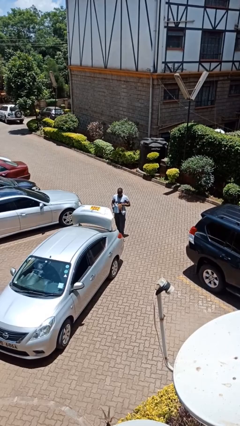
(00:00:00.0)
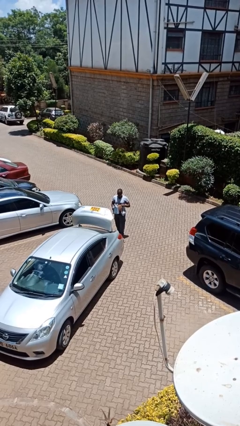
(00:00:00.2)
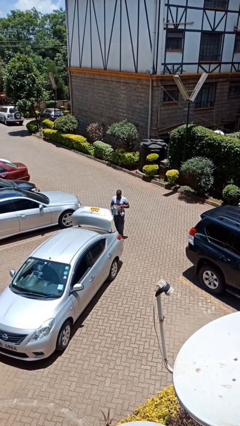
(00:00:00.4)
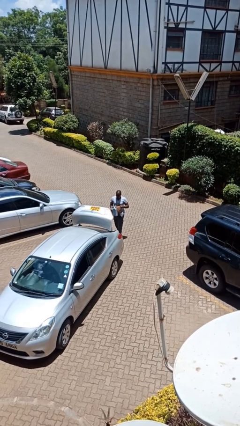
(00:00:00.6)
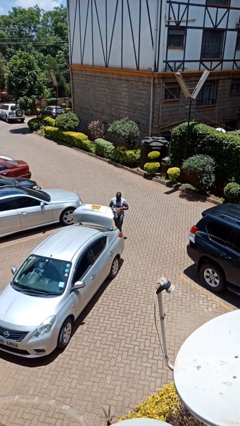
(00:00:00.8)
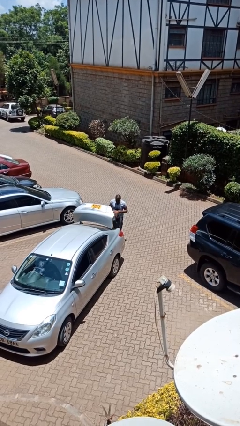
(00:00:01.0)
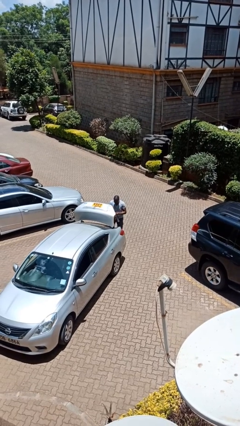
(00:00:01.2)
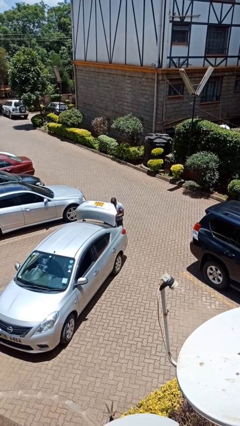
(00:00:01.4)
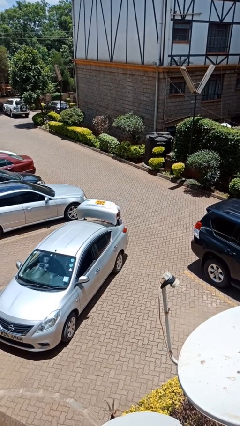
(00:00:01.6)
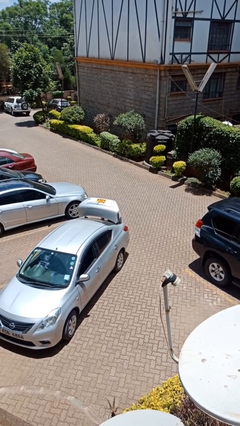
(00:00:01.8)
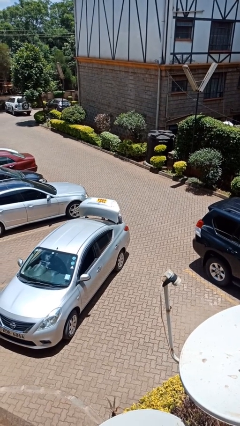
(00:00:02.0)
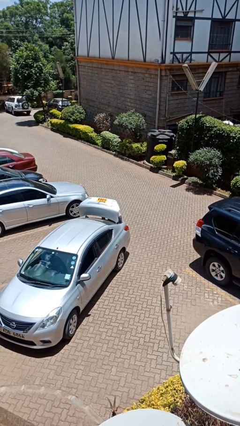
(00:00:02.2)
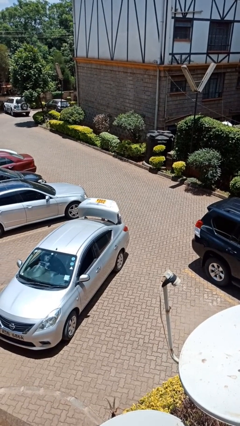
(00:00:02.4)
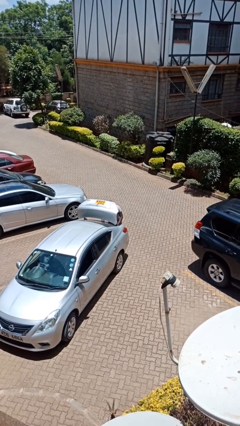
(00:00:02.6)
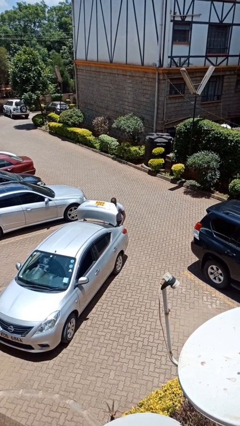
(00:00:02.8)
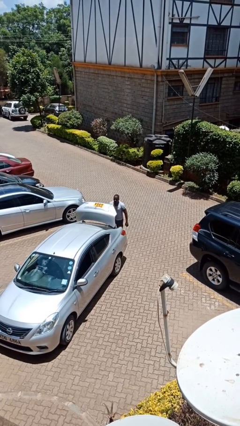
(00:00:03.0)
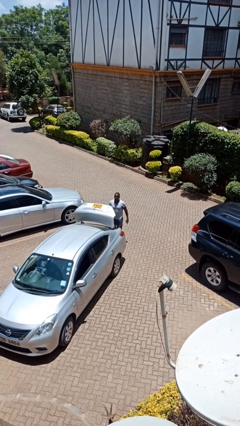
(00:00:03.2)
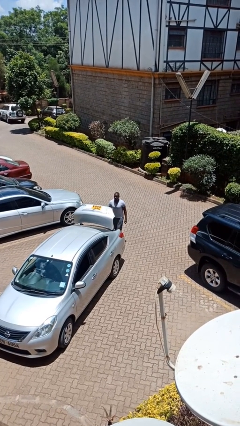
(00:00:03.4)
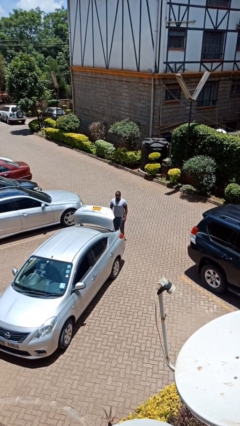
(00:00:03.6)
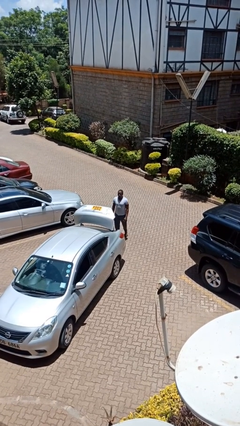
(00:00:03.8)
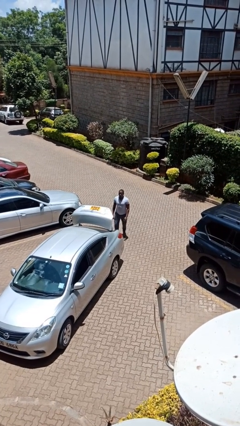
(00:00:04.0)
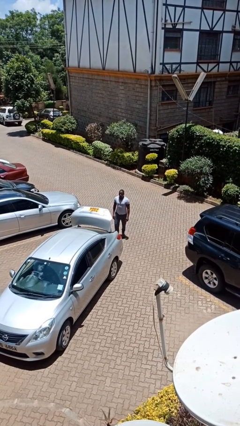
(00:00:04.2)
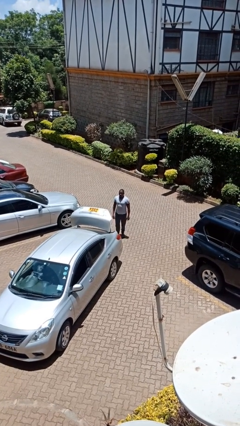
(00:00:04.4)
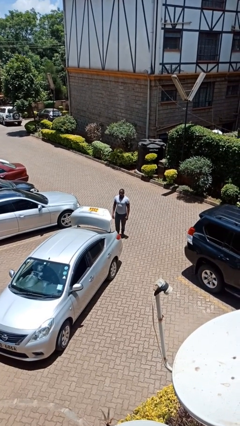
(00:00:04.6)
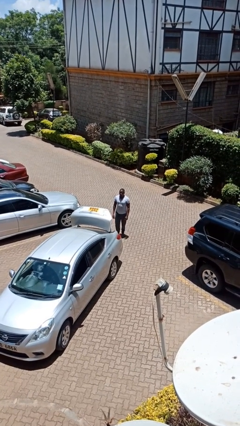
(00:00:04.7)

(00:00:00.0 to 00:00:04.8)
person loads car

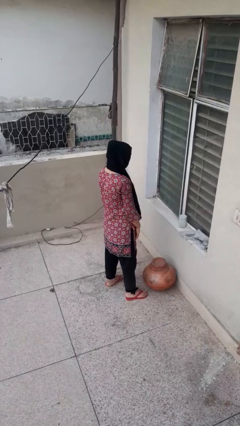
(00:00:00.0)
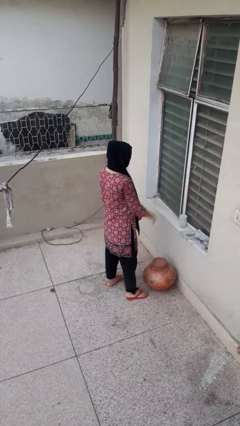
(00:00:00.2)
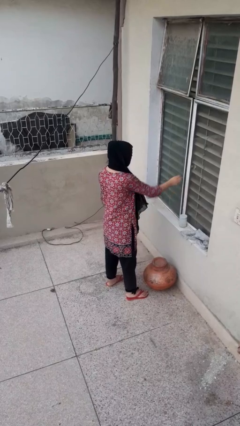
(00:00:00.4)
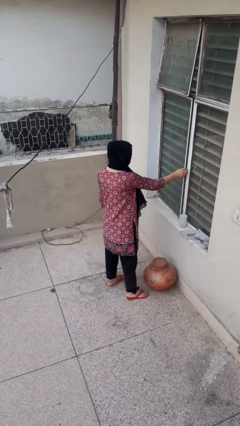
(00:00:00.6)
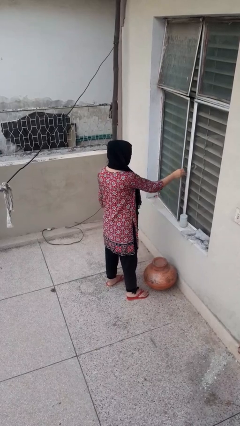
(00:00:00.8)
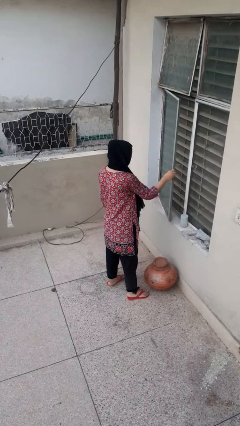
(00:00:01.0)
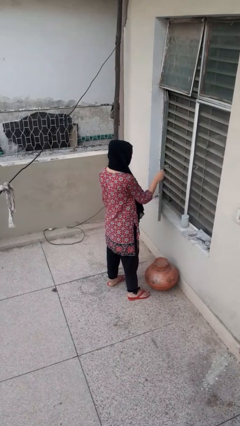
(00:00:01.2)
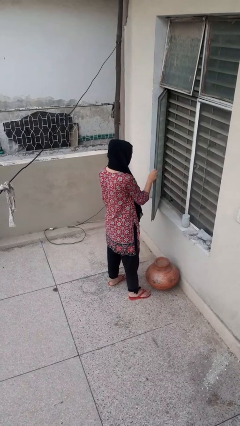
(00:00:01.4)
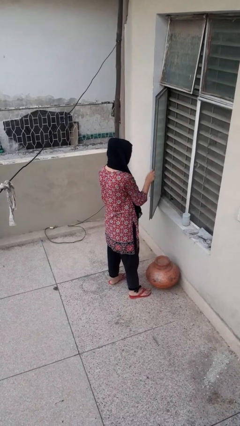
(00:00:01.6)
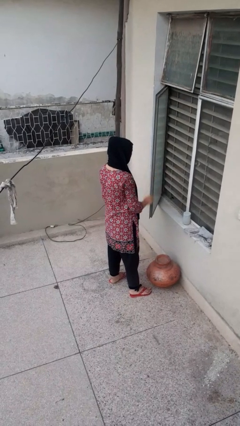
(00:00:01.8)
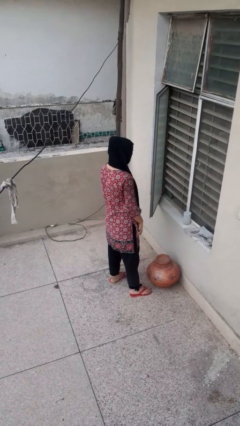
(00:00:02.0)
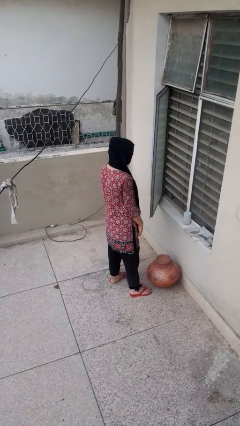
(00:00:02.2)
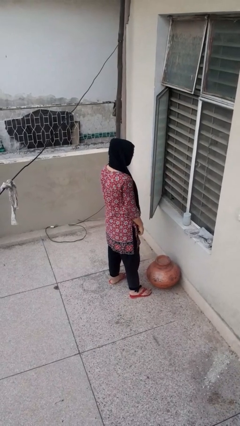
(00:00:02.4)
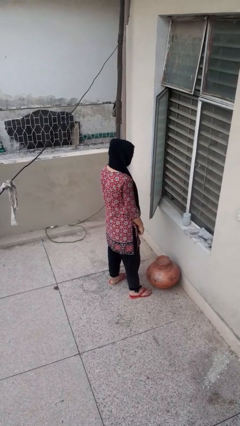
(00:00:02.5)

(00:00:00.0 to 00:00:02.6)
person opens home window

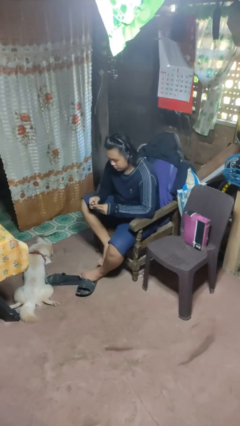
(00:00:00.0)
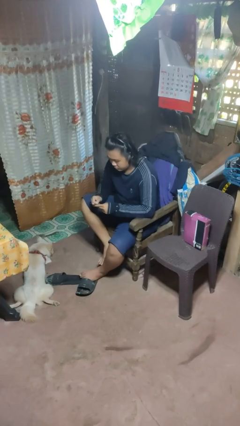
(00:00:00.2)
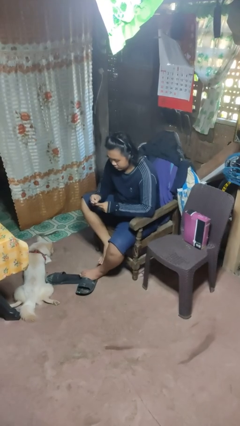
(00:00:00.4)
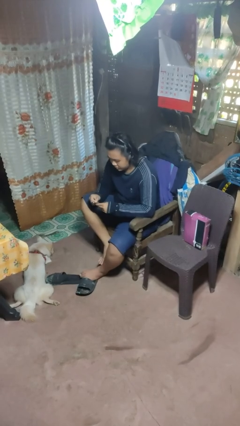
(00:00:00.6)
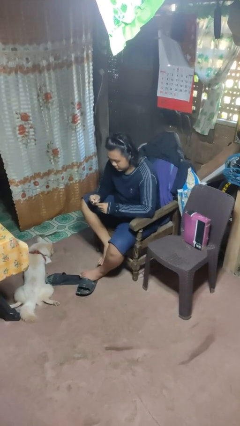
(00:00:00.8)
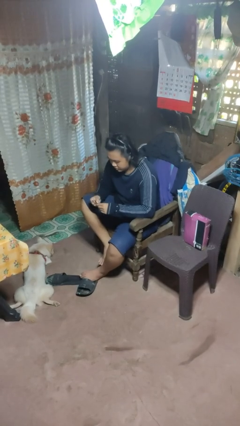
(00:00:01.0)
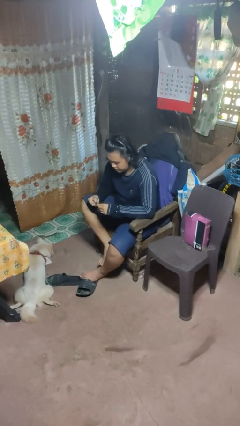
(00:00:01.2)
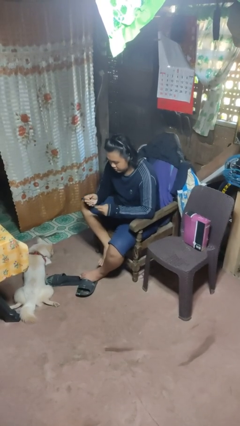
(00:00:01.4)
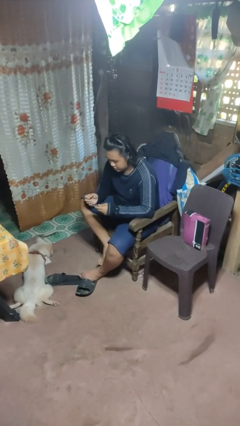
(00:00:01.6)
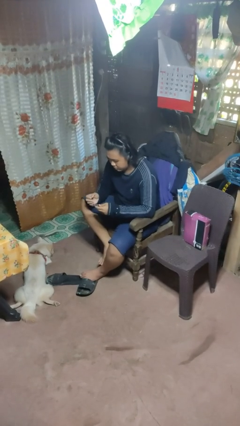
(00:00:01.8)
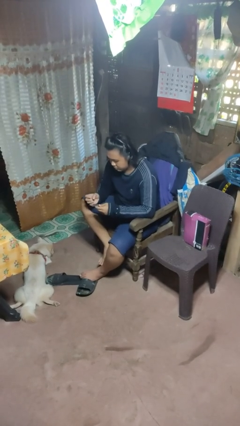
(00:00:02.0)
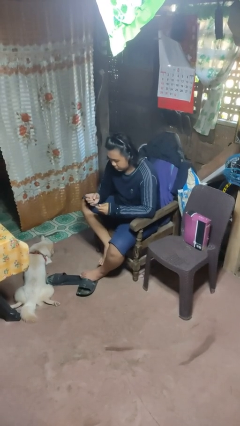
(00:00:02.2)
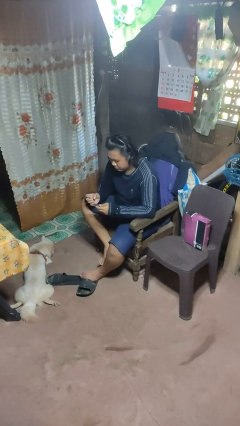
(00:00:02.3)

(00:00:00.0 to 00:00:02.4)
person files fingernails

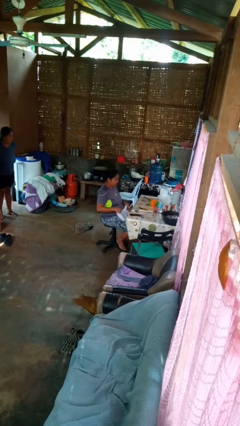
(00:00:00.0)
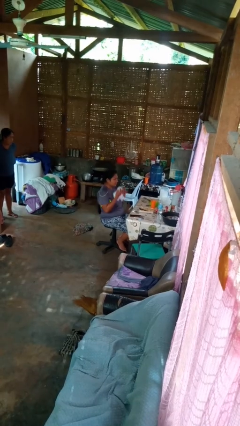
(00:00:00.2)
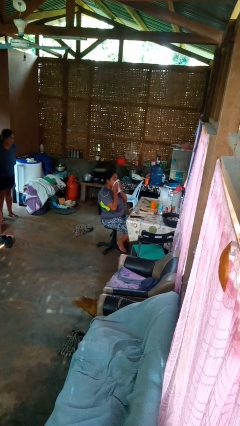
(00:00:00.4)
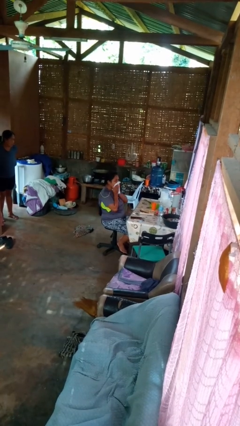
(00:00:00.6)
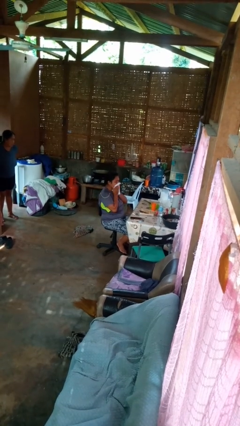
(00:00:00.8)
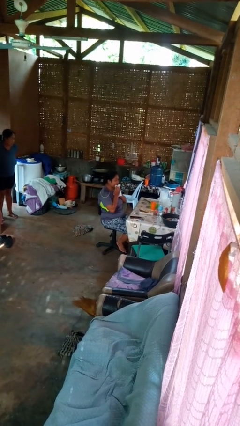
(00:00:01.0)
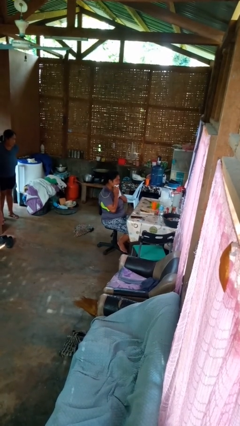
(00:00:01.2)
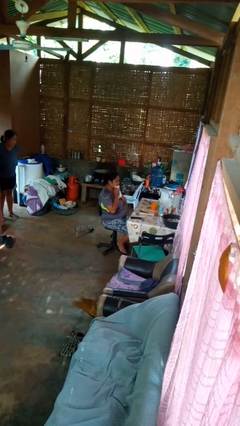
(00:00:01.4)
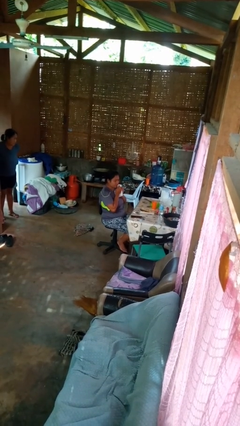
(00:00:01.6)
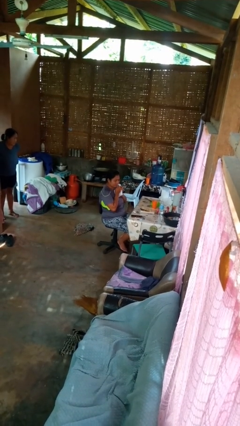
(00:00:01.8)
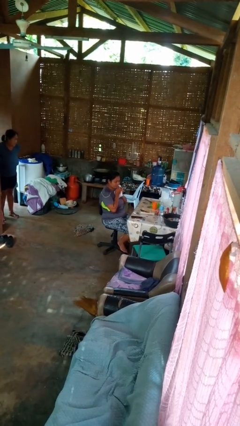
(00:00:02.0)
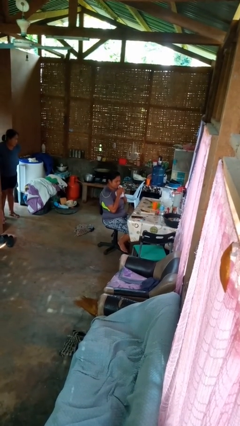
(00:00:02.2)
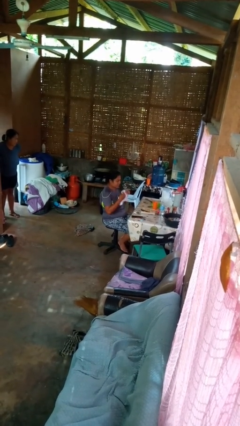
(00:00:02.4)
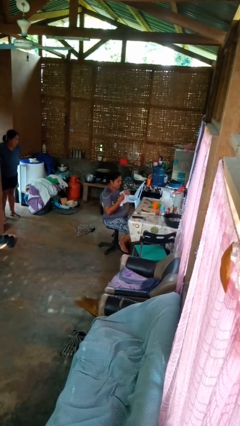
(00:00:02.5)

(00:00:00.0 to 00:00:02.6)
person wipes mouth with napkin

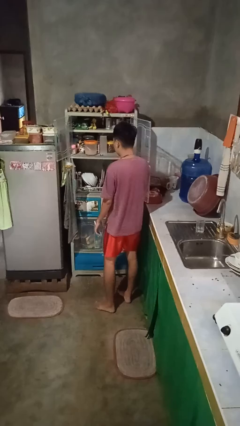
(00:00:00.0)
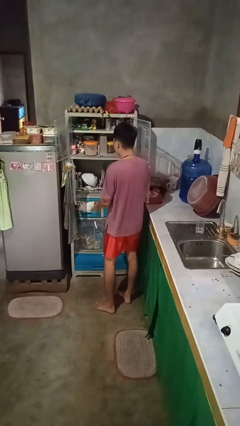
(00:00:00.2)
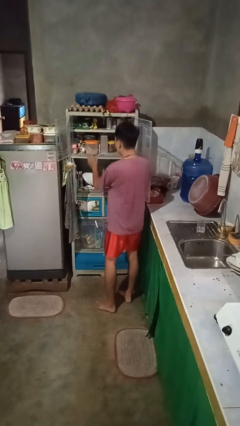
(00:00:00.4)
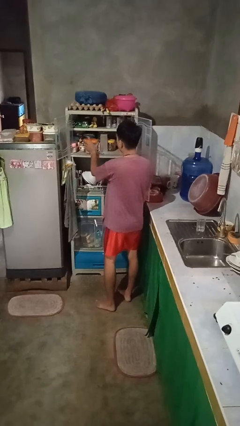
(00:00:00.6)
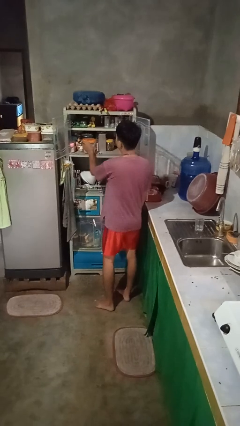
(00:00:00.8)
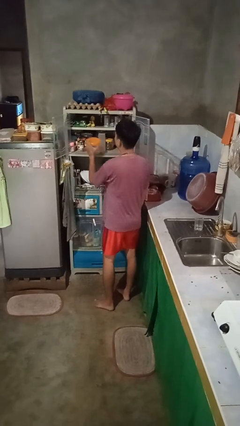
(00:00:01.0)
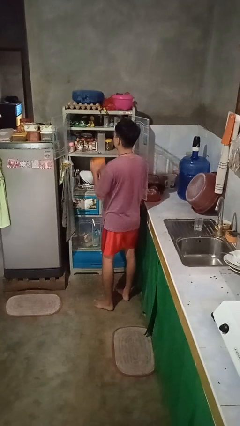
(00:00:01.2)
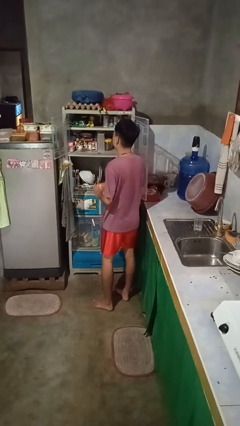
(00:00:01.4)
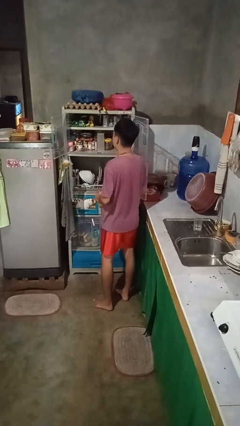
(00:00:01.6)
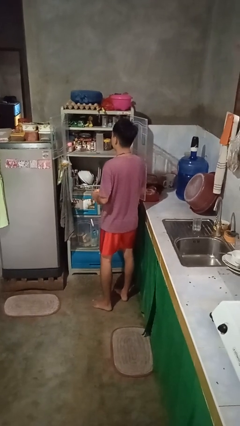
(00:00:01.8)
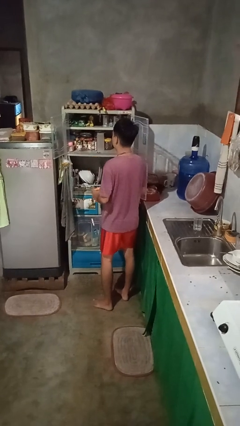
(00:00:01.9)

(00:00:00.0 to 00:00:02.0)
person takes object from cabinet

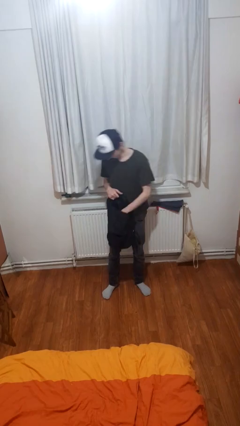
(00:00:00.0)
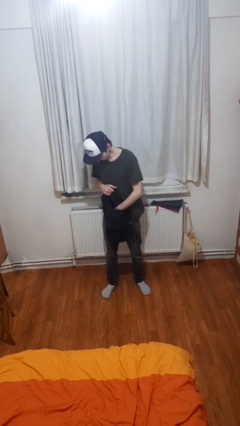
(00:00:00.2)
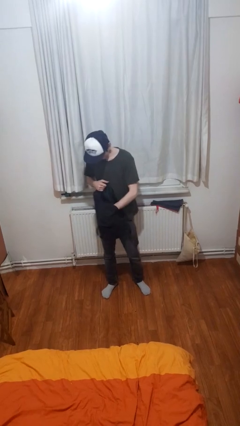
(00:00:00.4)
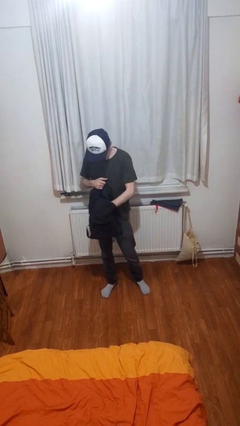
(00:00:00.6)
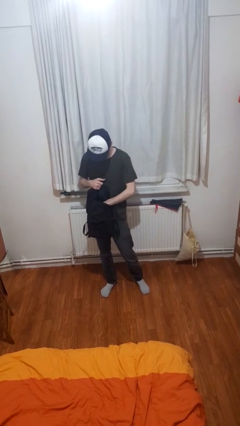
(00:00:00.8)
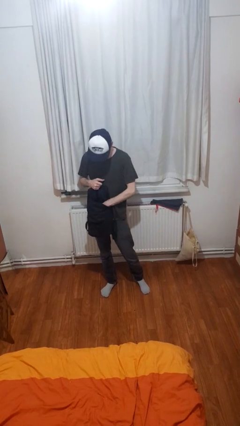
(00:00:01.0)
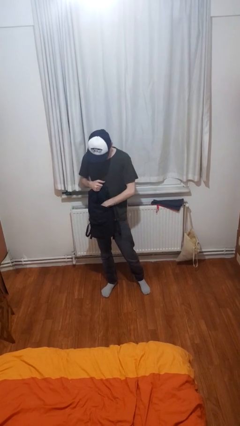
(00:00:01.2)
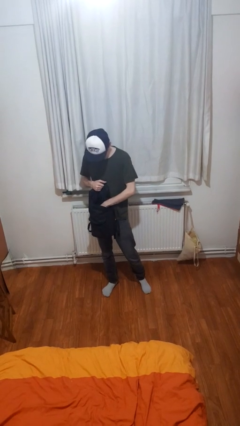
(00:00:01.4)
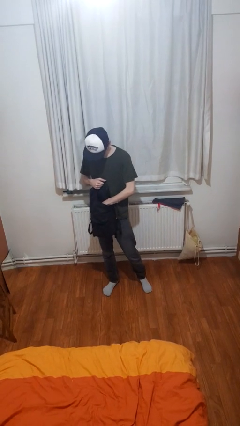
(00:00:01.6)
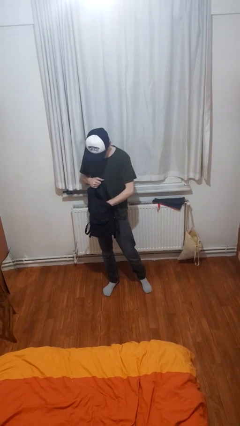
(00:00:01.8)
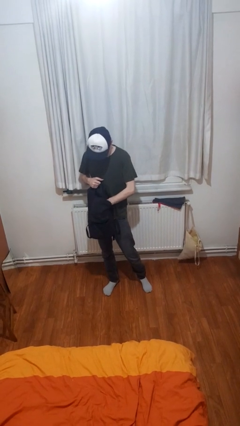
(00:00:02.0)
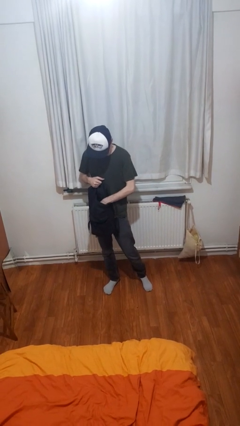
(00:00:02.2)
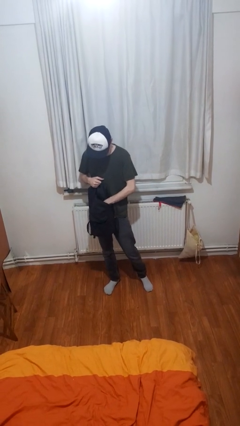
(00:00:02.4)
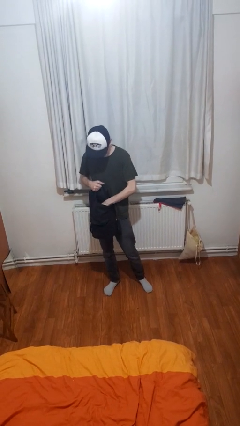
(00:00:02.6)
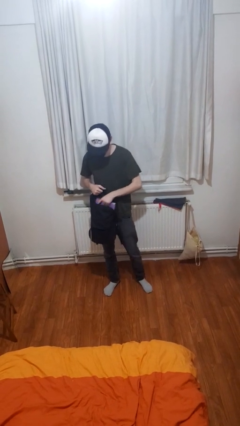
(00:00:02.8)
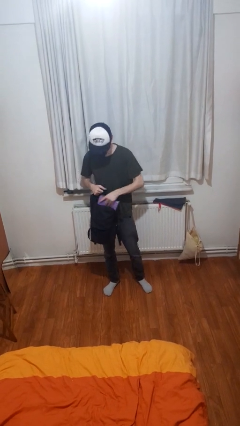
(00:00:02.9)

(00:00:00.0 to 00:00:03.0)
person searches in backpack
